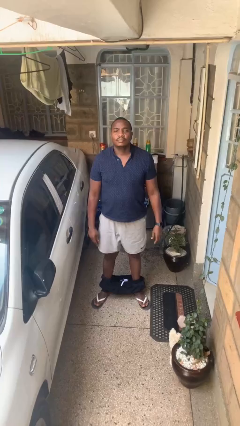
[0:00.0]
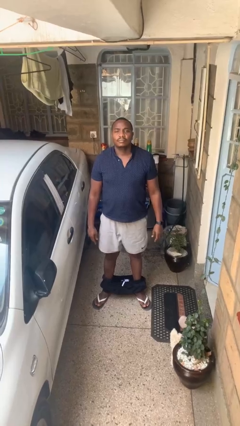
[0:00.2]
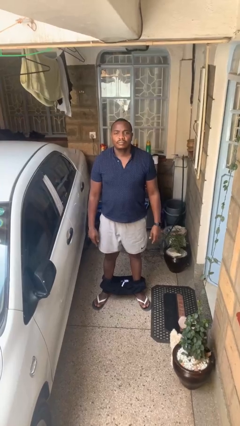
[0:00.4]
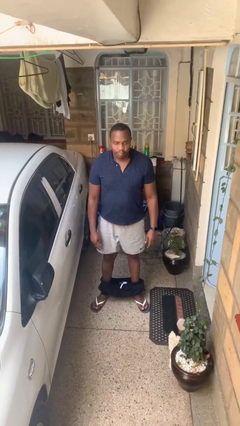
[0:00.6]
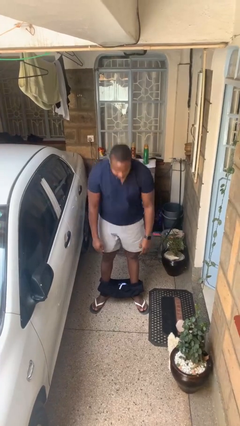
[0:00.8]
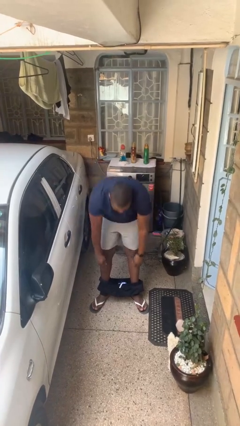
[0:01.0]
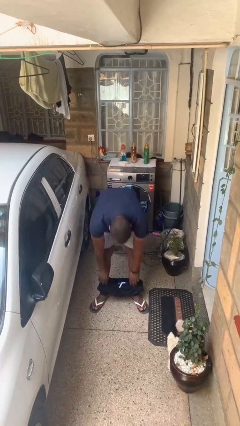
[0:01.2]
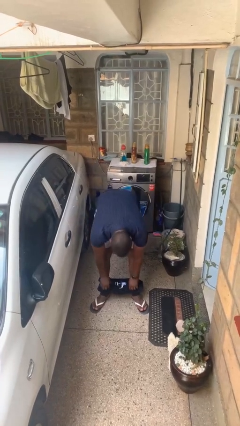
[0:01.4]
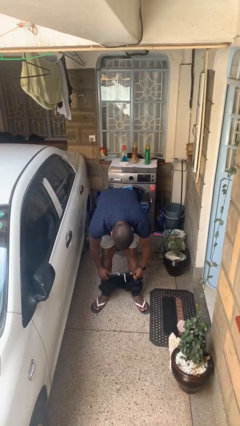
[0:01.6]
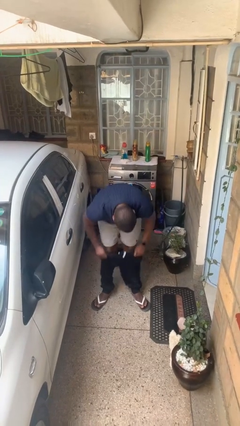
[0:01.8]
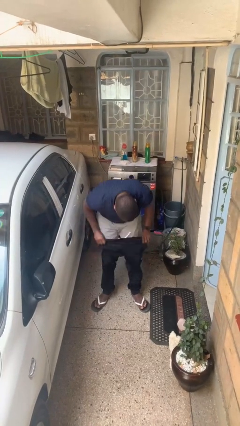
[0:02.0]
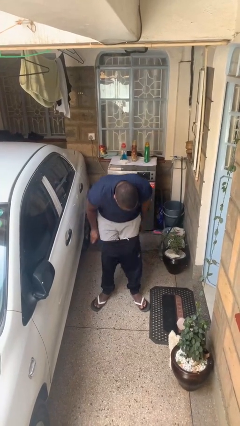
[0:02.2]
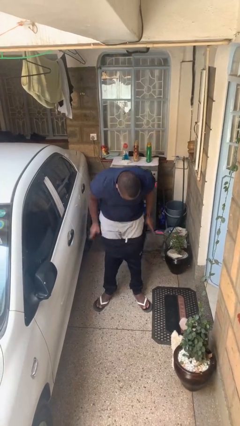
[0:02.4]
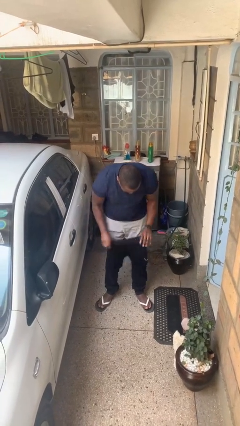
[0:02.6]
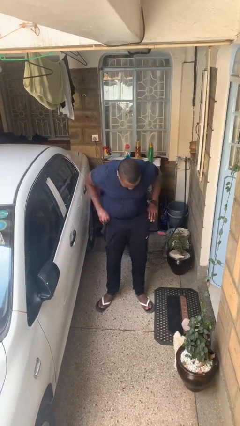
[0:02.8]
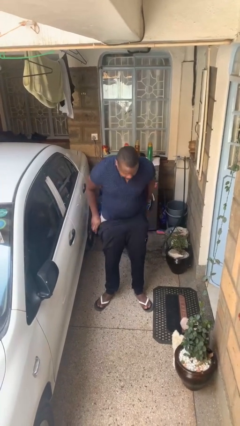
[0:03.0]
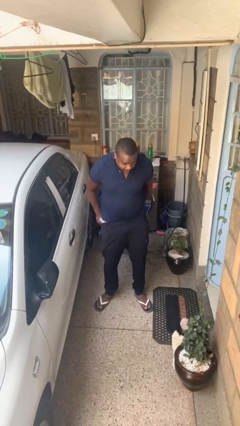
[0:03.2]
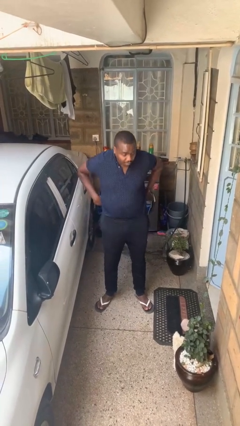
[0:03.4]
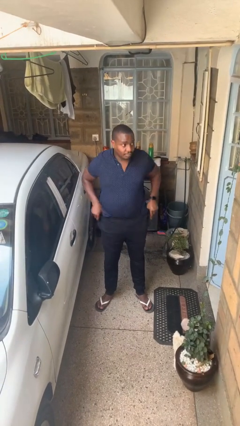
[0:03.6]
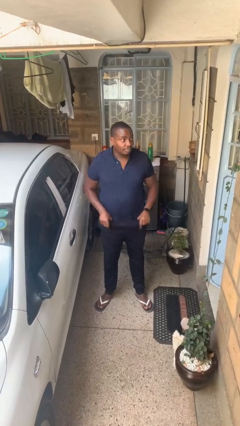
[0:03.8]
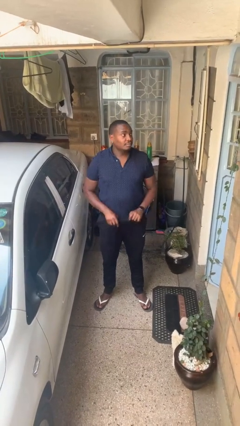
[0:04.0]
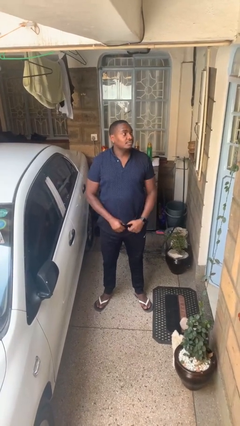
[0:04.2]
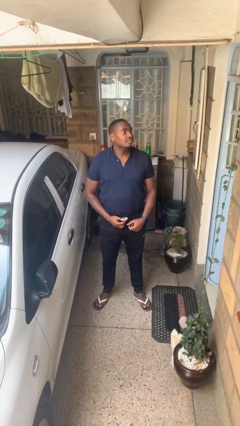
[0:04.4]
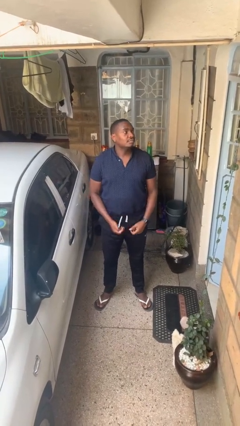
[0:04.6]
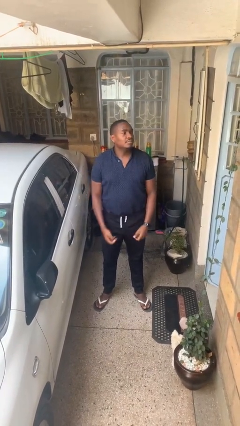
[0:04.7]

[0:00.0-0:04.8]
person puts on pants

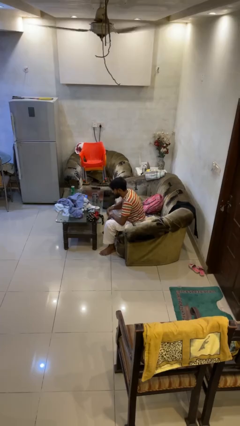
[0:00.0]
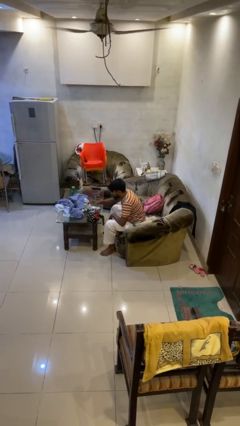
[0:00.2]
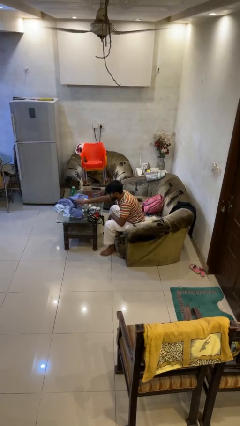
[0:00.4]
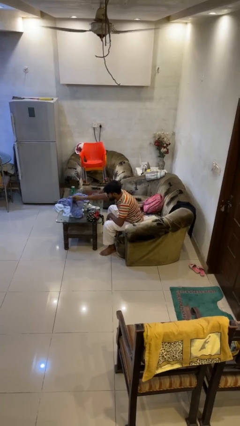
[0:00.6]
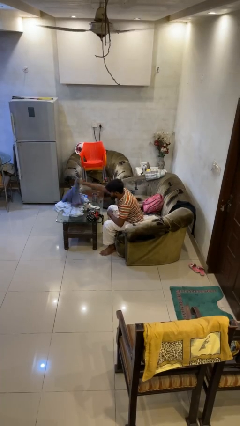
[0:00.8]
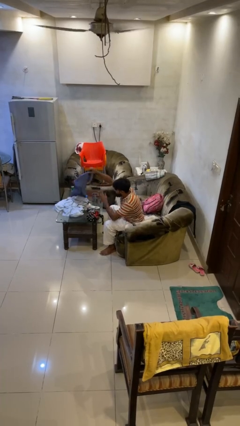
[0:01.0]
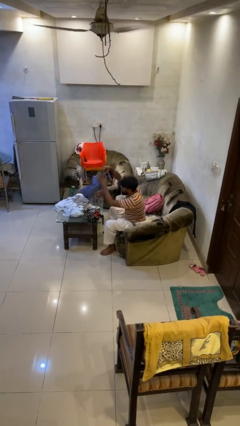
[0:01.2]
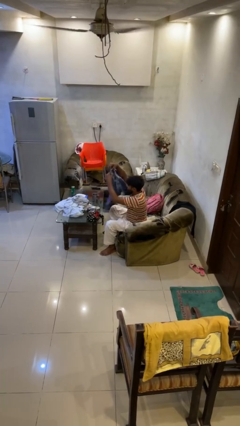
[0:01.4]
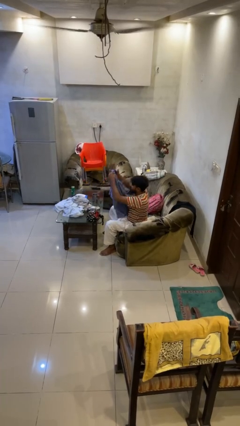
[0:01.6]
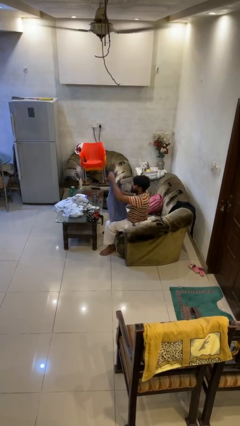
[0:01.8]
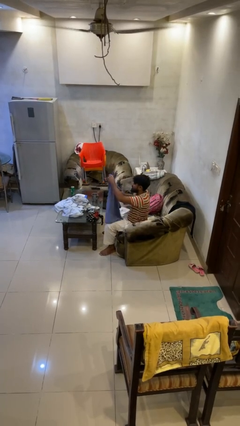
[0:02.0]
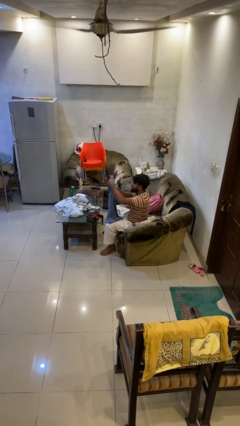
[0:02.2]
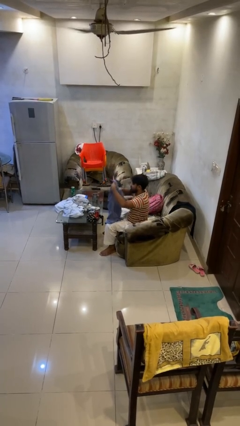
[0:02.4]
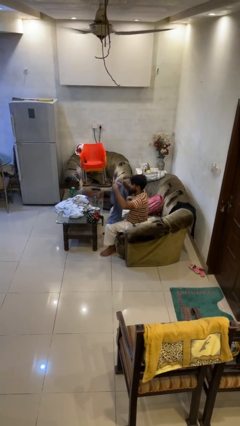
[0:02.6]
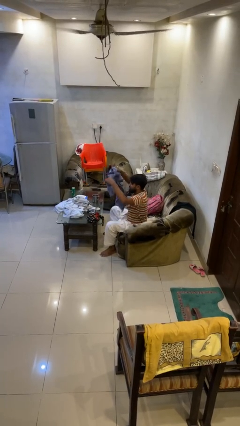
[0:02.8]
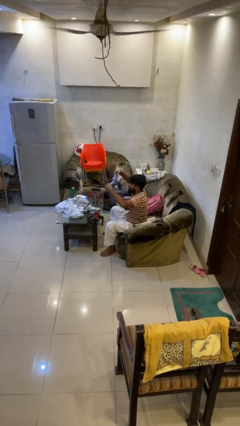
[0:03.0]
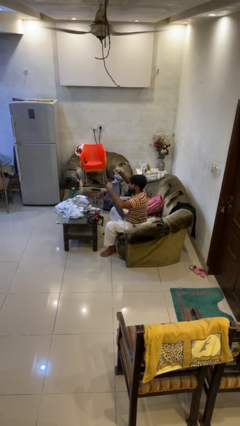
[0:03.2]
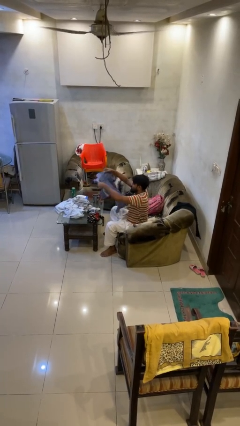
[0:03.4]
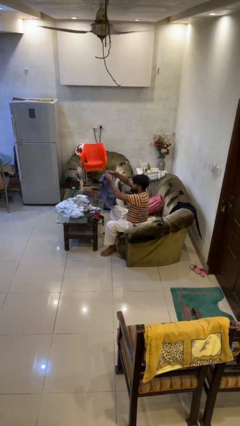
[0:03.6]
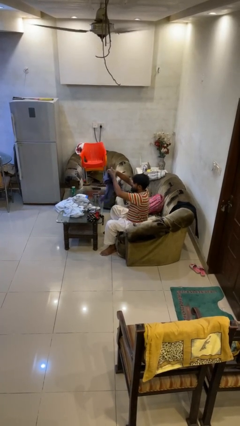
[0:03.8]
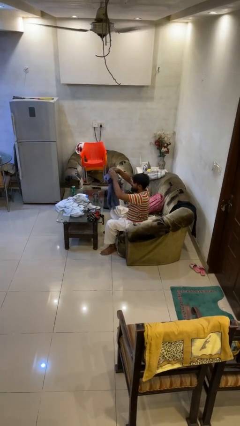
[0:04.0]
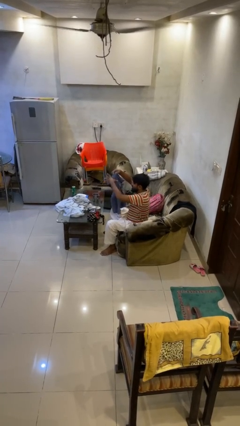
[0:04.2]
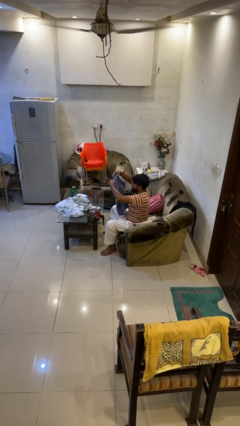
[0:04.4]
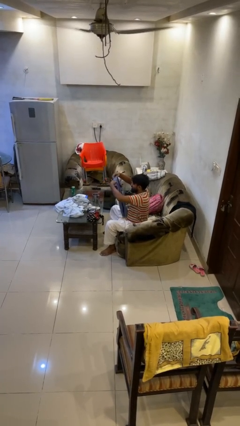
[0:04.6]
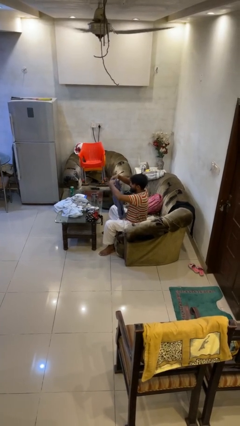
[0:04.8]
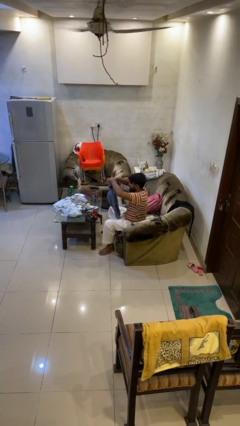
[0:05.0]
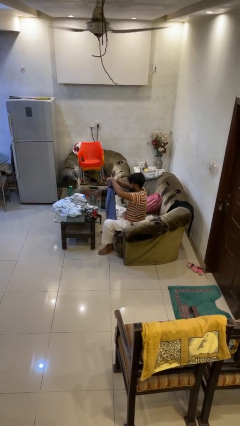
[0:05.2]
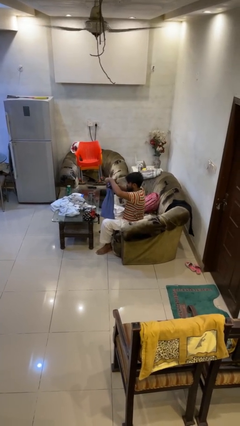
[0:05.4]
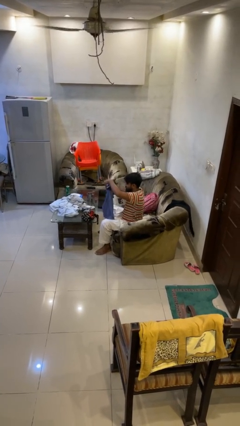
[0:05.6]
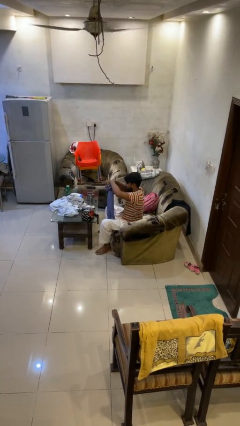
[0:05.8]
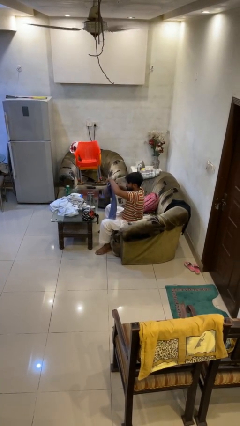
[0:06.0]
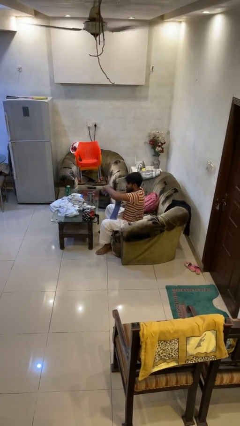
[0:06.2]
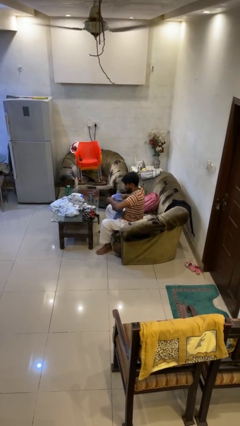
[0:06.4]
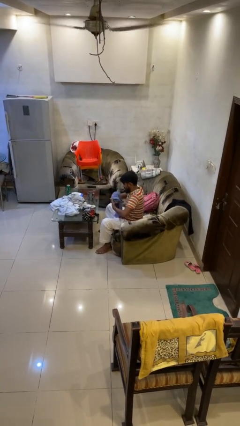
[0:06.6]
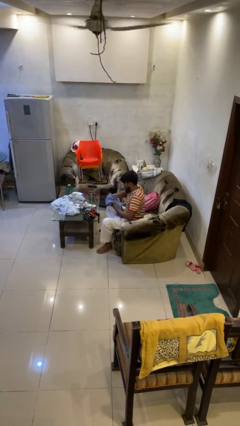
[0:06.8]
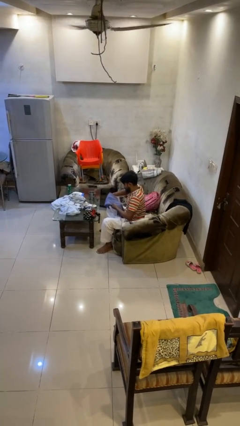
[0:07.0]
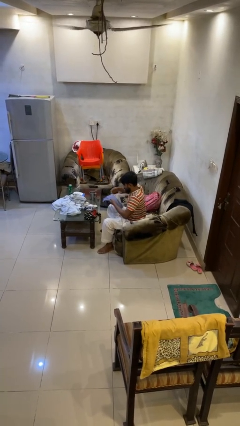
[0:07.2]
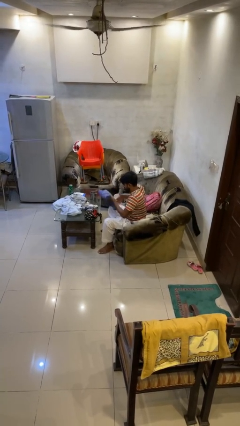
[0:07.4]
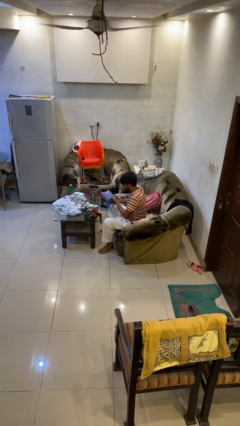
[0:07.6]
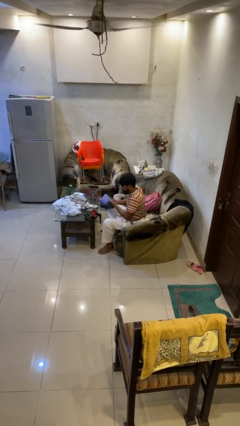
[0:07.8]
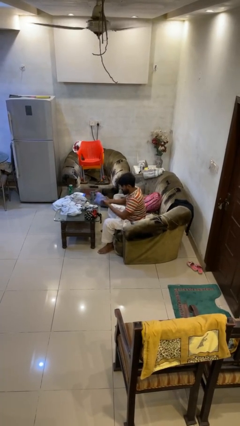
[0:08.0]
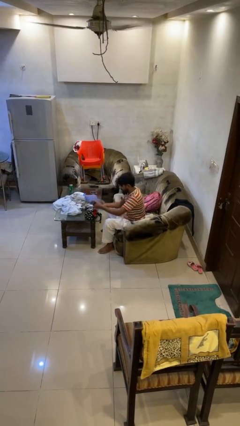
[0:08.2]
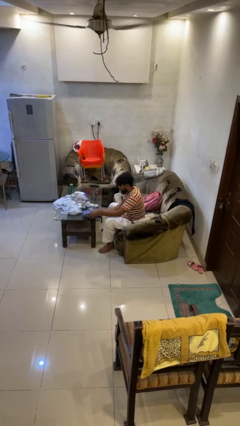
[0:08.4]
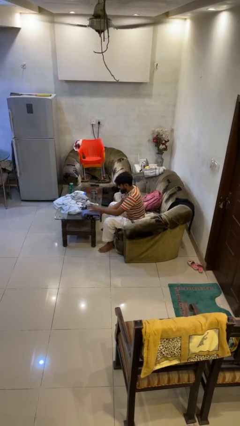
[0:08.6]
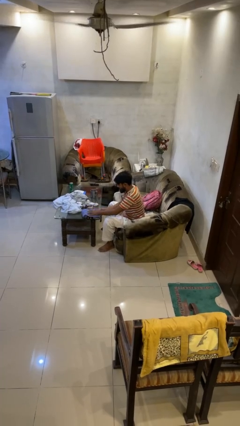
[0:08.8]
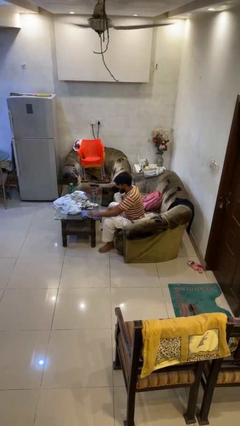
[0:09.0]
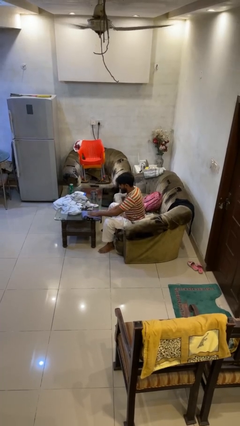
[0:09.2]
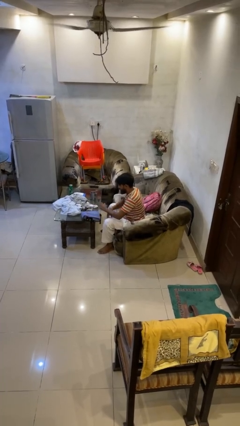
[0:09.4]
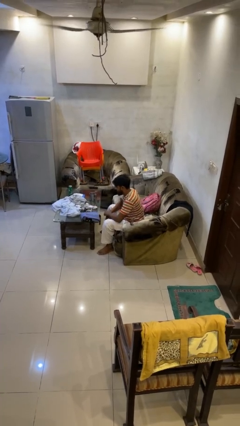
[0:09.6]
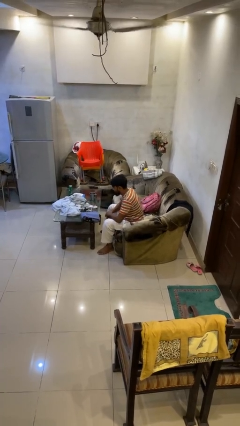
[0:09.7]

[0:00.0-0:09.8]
person folds shirt

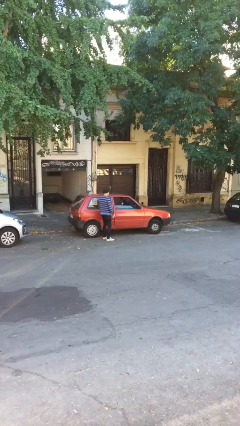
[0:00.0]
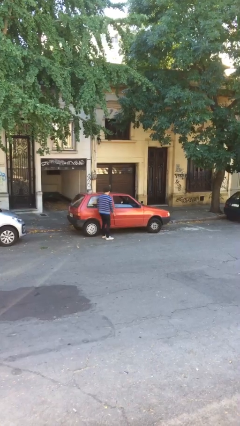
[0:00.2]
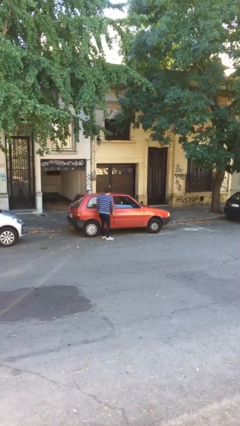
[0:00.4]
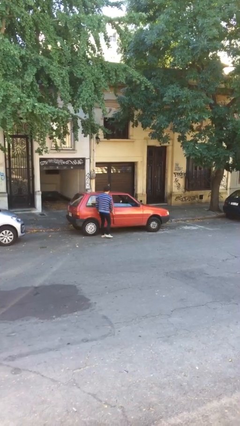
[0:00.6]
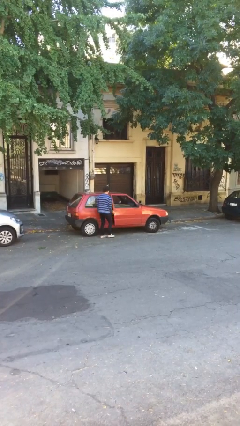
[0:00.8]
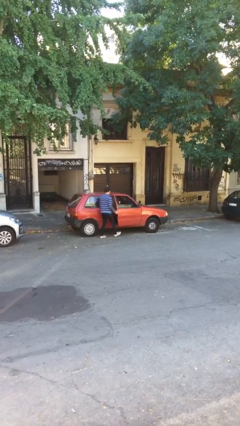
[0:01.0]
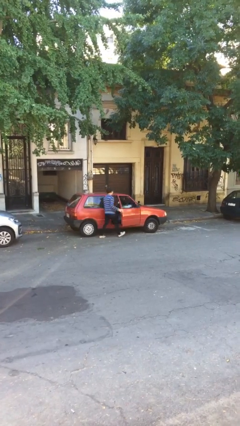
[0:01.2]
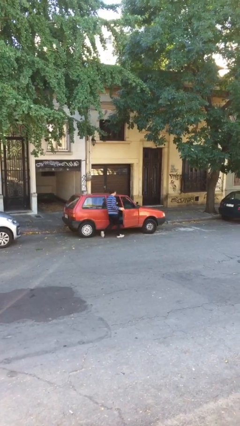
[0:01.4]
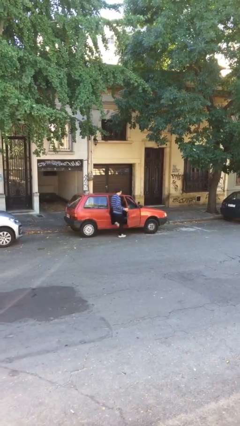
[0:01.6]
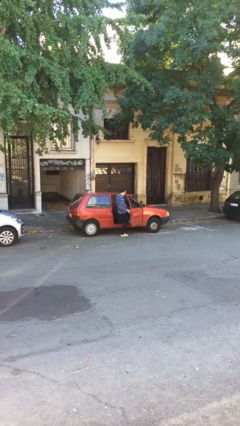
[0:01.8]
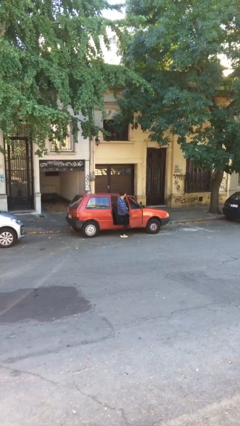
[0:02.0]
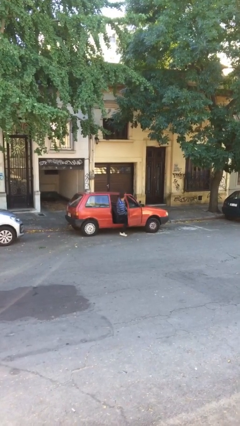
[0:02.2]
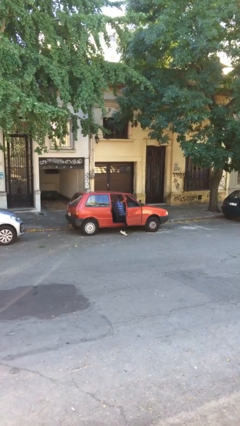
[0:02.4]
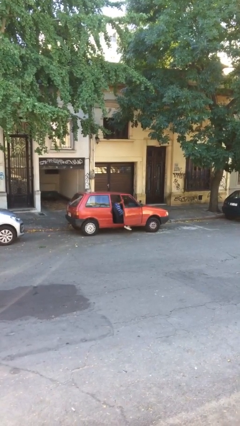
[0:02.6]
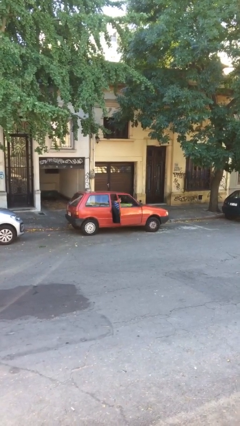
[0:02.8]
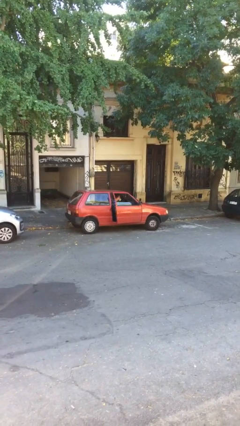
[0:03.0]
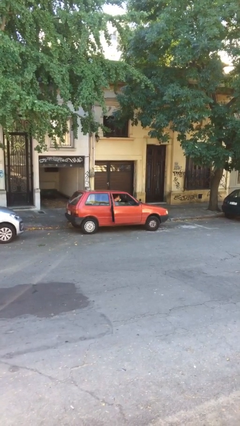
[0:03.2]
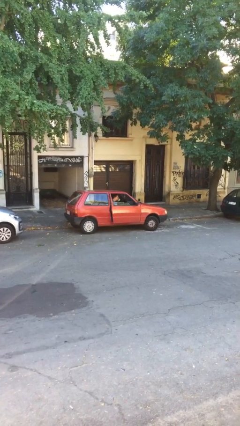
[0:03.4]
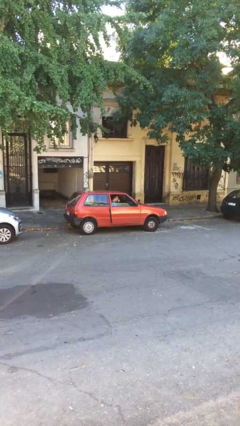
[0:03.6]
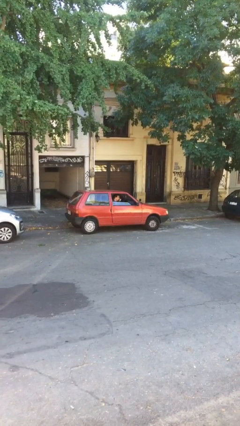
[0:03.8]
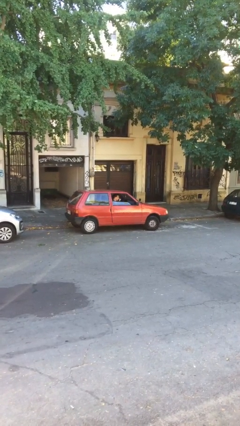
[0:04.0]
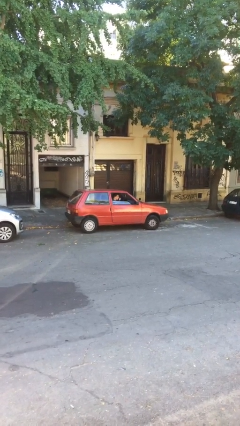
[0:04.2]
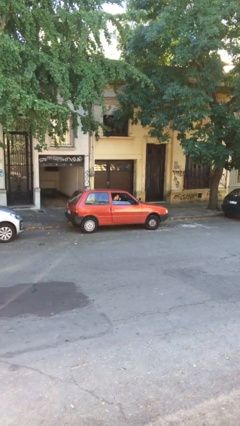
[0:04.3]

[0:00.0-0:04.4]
car picks up person
